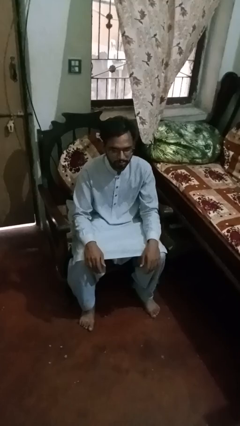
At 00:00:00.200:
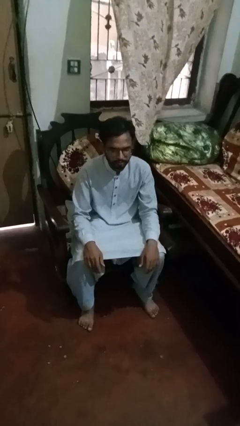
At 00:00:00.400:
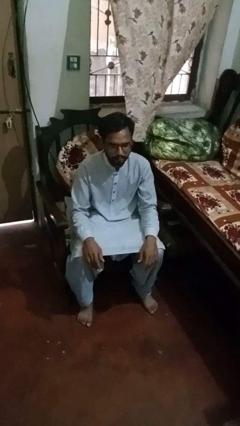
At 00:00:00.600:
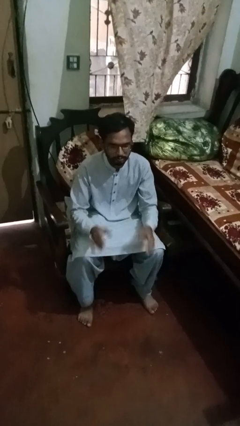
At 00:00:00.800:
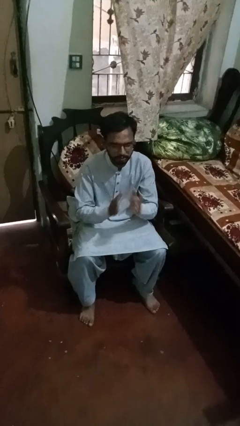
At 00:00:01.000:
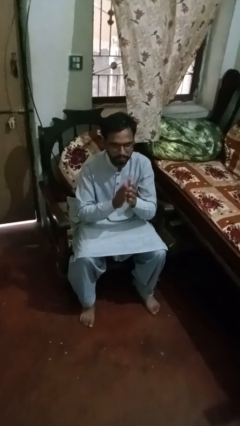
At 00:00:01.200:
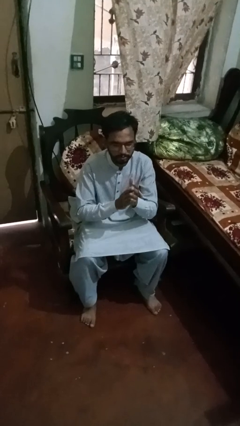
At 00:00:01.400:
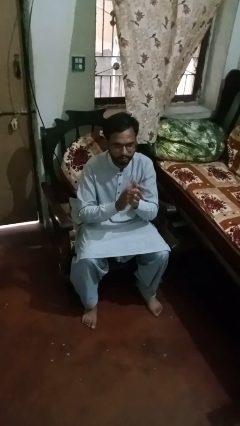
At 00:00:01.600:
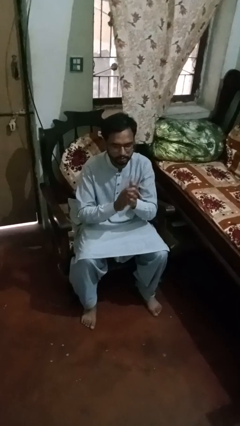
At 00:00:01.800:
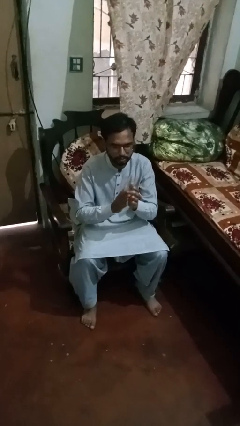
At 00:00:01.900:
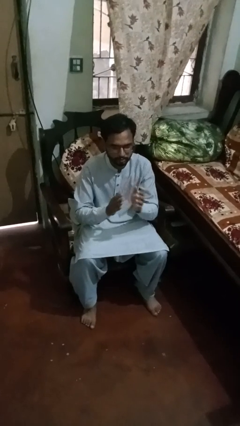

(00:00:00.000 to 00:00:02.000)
person claps hands

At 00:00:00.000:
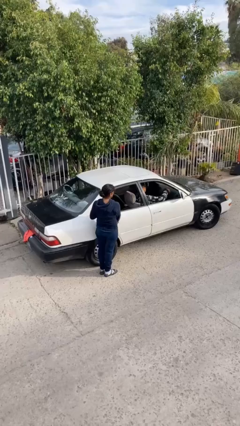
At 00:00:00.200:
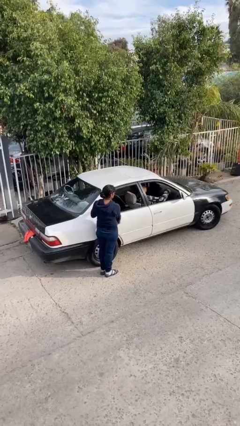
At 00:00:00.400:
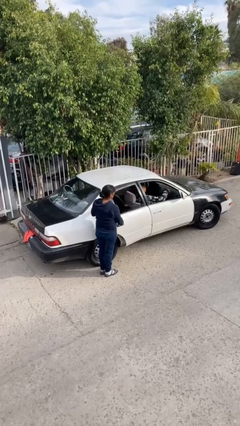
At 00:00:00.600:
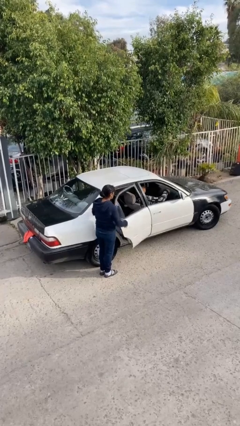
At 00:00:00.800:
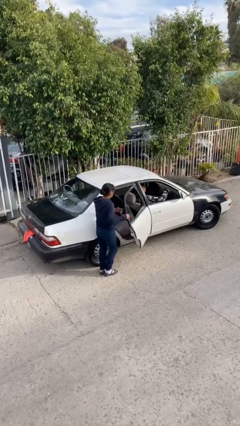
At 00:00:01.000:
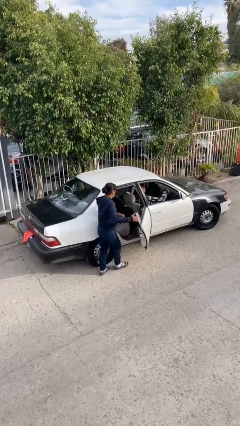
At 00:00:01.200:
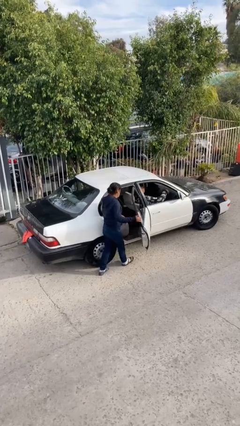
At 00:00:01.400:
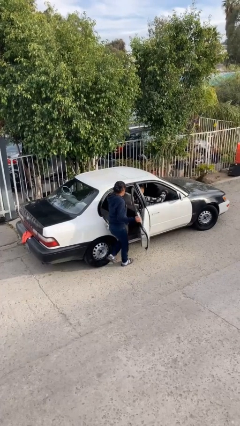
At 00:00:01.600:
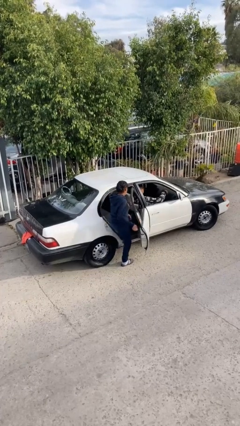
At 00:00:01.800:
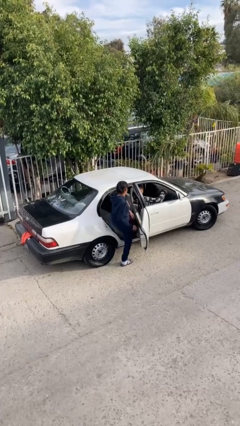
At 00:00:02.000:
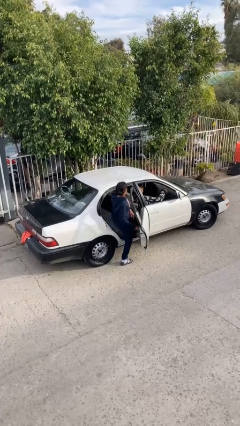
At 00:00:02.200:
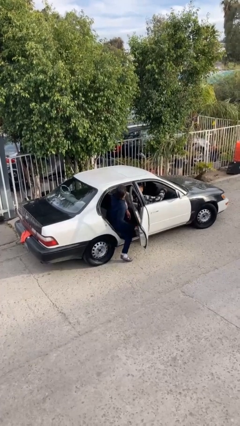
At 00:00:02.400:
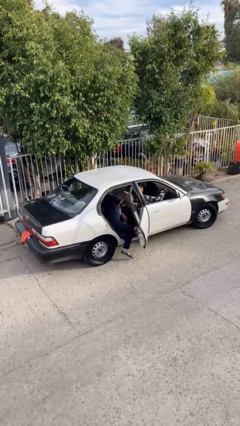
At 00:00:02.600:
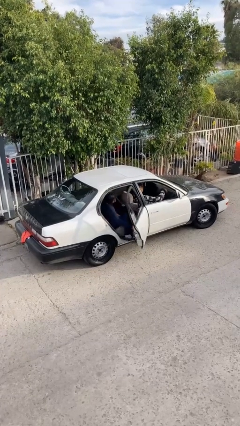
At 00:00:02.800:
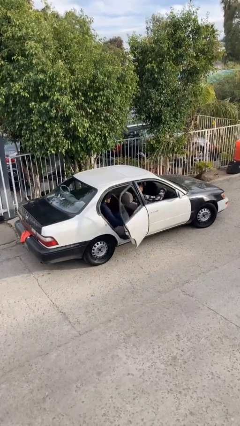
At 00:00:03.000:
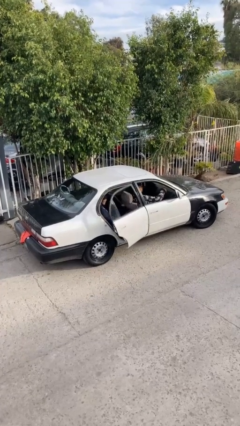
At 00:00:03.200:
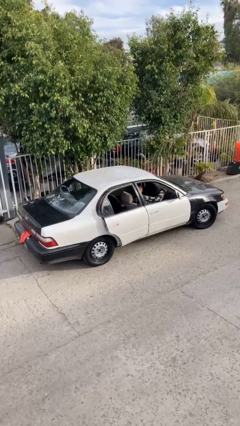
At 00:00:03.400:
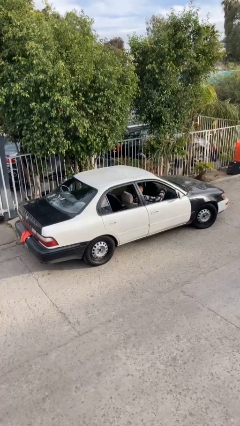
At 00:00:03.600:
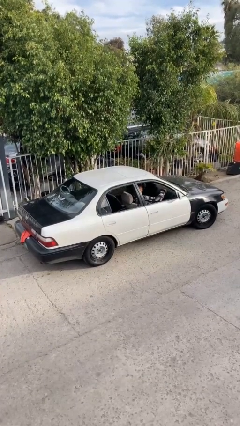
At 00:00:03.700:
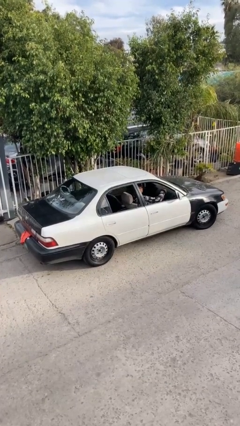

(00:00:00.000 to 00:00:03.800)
car picks up person

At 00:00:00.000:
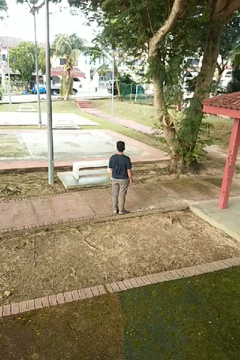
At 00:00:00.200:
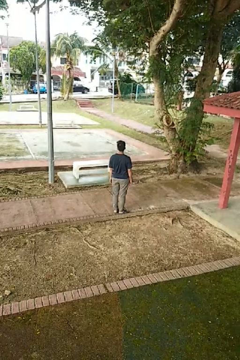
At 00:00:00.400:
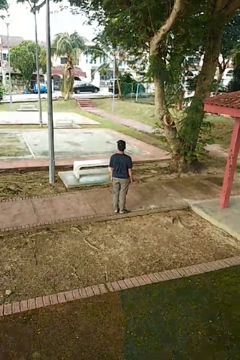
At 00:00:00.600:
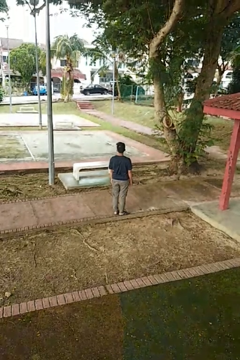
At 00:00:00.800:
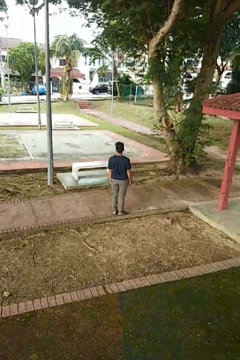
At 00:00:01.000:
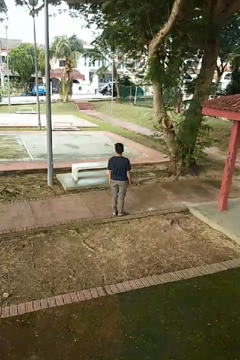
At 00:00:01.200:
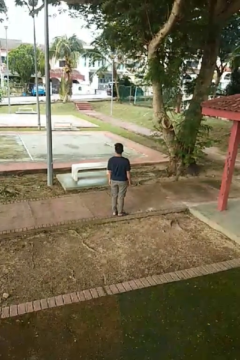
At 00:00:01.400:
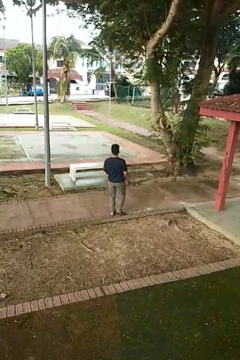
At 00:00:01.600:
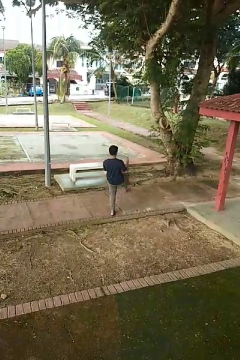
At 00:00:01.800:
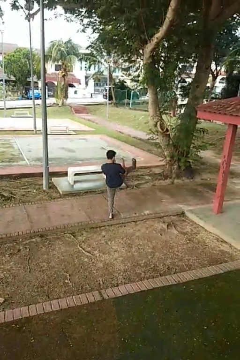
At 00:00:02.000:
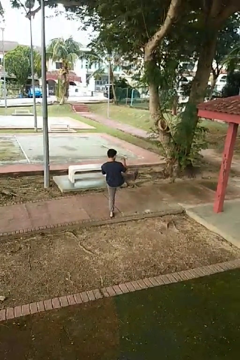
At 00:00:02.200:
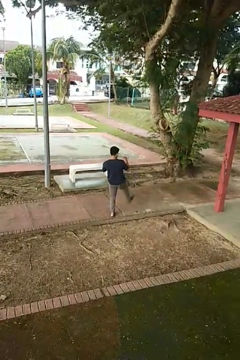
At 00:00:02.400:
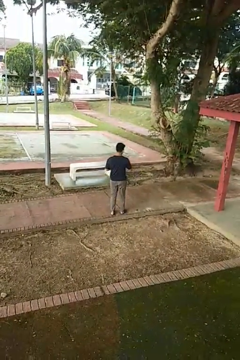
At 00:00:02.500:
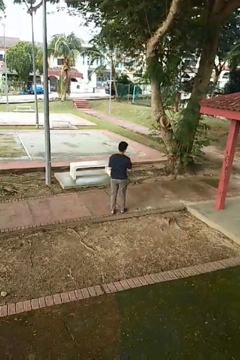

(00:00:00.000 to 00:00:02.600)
person karate kicks

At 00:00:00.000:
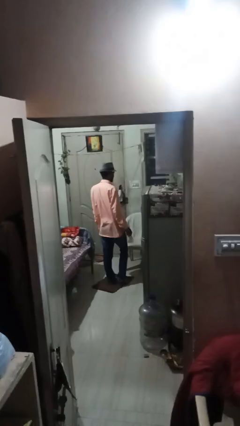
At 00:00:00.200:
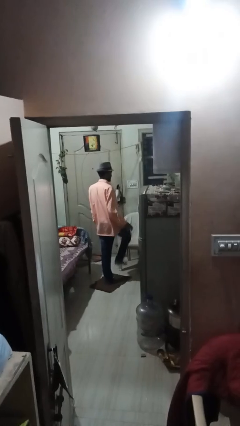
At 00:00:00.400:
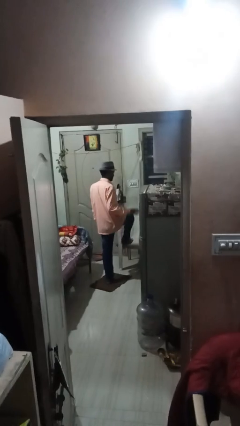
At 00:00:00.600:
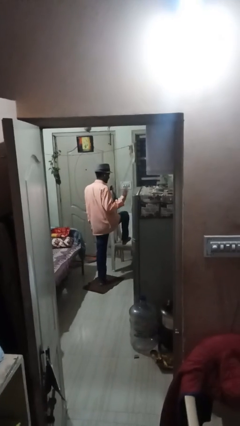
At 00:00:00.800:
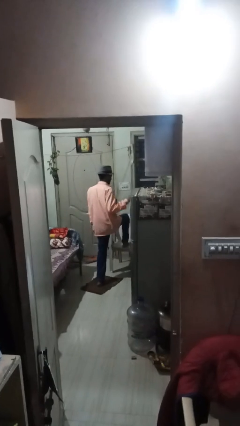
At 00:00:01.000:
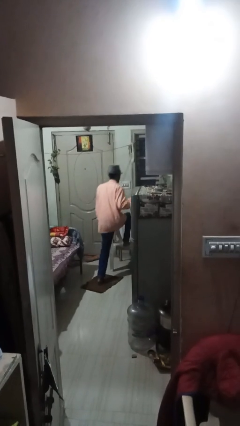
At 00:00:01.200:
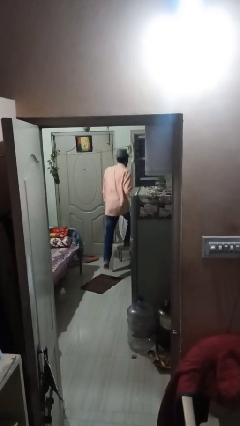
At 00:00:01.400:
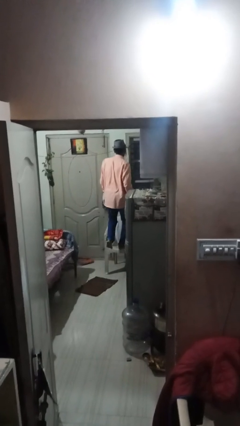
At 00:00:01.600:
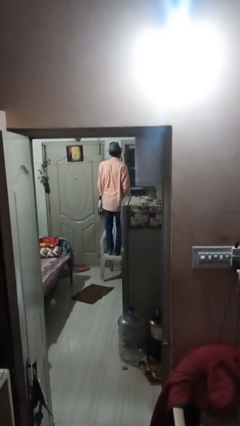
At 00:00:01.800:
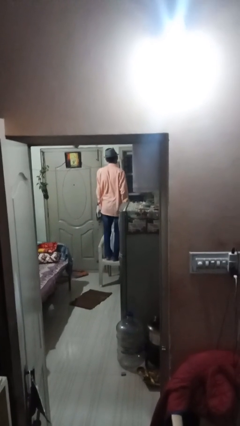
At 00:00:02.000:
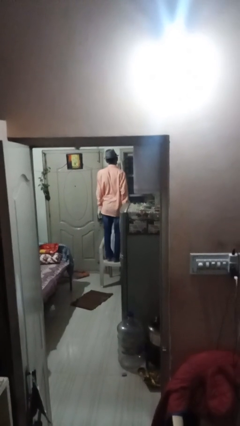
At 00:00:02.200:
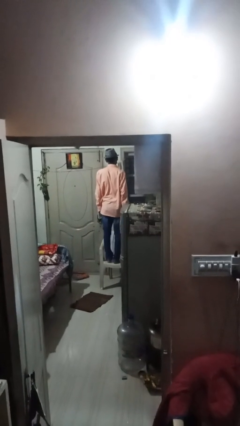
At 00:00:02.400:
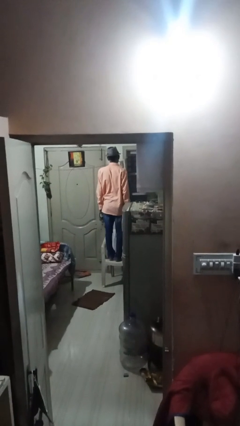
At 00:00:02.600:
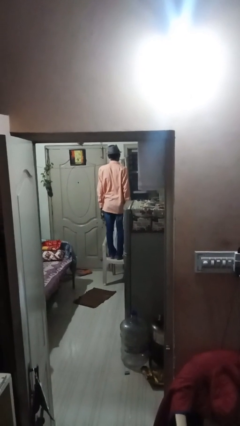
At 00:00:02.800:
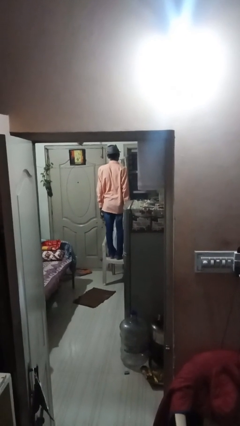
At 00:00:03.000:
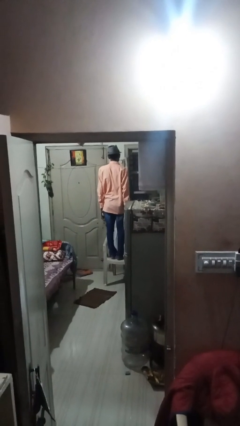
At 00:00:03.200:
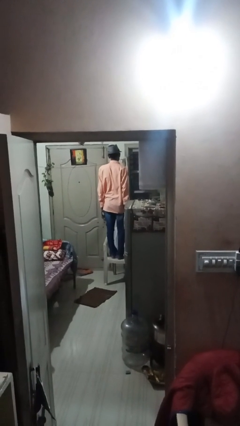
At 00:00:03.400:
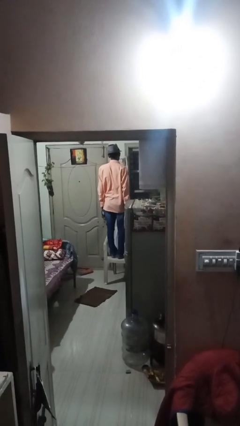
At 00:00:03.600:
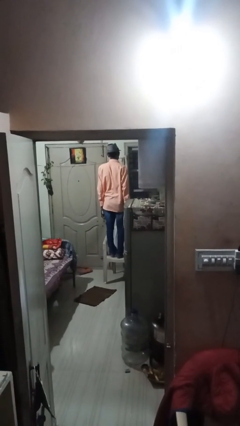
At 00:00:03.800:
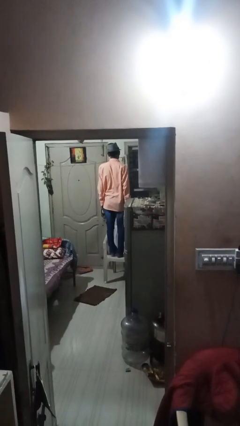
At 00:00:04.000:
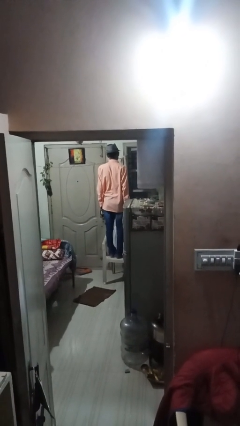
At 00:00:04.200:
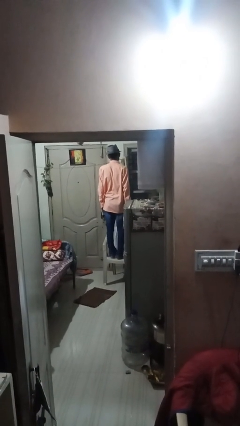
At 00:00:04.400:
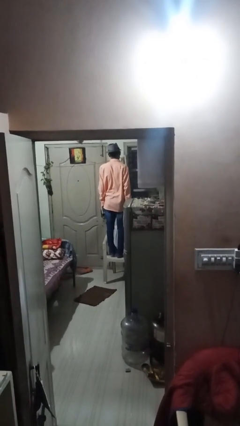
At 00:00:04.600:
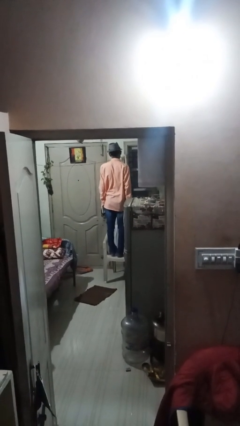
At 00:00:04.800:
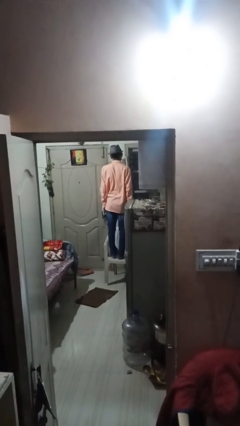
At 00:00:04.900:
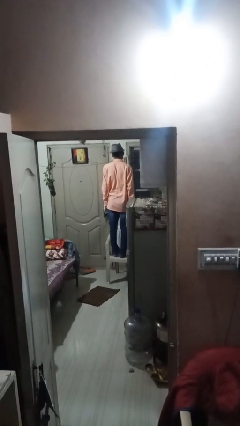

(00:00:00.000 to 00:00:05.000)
person climbs on chair

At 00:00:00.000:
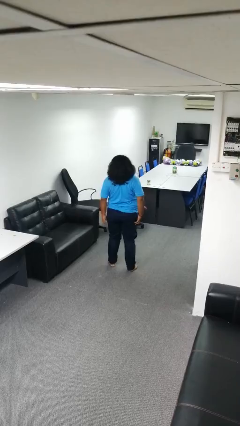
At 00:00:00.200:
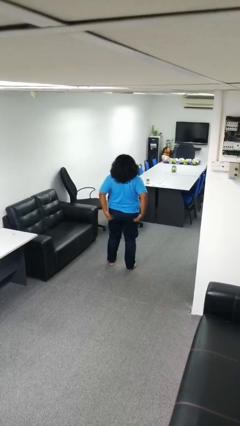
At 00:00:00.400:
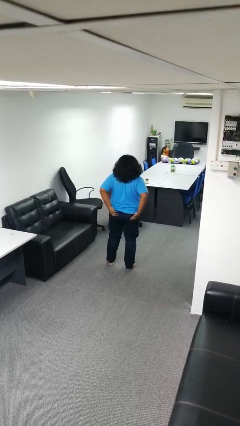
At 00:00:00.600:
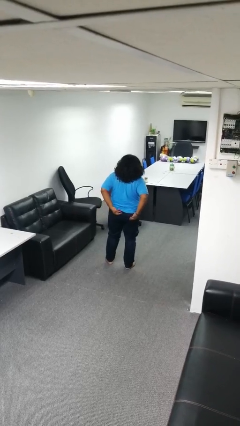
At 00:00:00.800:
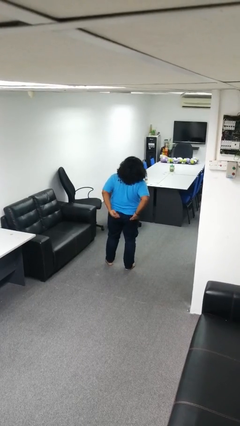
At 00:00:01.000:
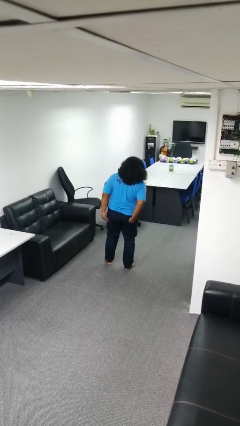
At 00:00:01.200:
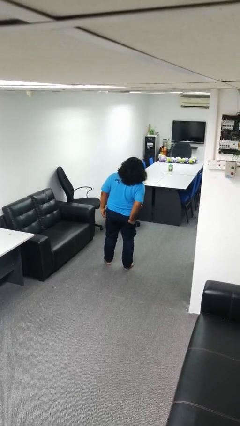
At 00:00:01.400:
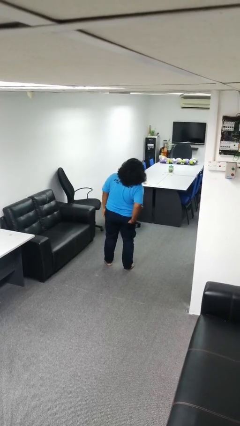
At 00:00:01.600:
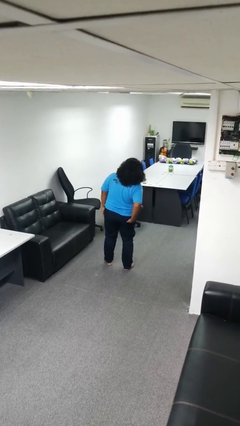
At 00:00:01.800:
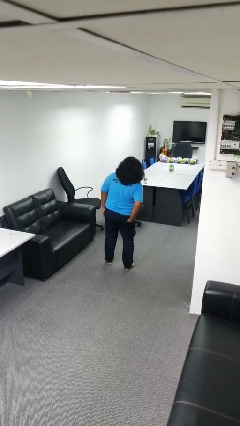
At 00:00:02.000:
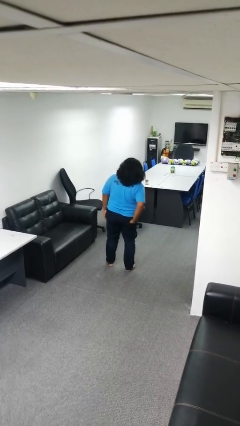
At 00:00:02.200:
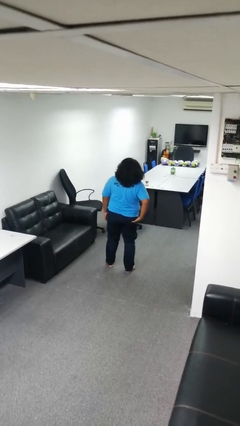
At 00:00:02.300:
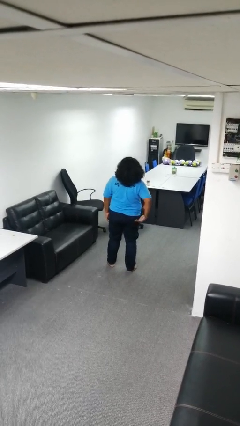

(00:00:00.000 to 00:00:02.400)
person puts hands in back pockets

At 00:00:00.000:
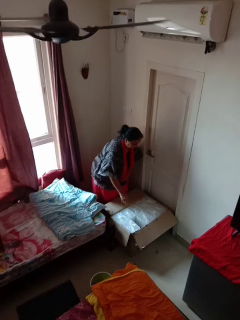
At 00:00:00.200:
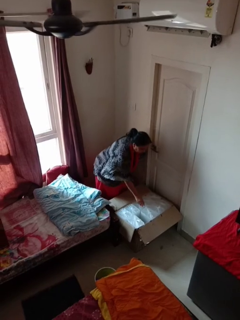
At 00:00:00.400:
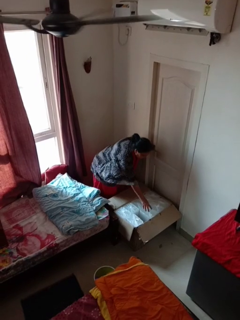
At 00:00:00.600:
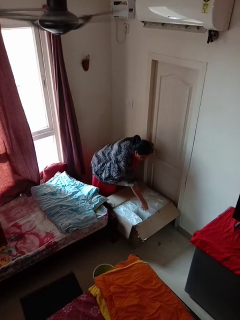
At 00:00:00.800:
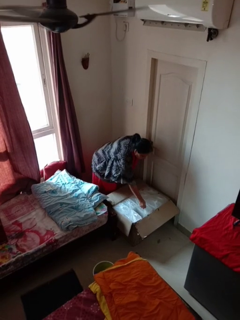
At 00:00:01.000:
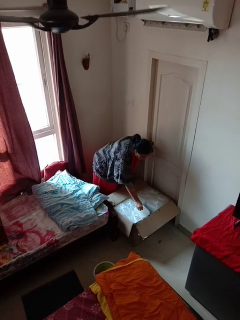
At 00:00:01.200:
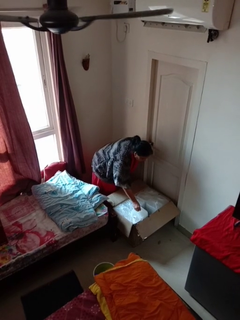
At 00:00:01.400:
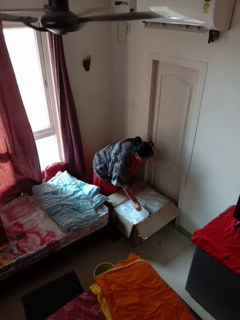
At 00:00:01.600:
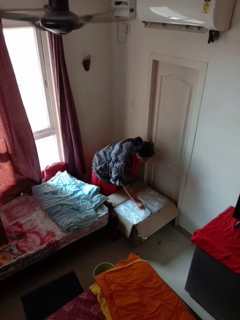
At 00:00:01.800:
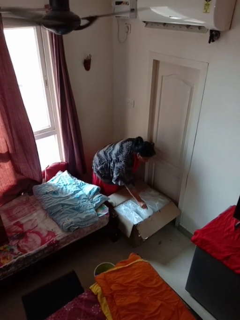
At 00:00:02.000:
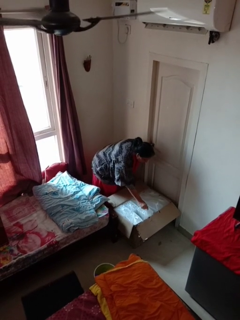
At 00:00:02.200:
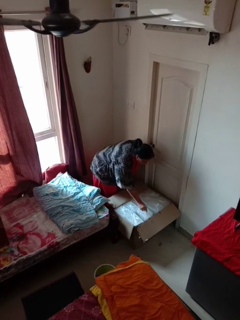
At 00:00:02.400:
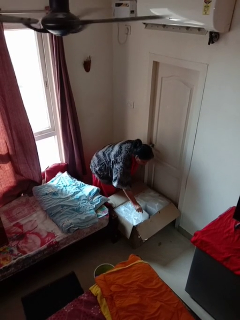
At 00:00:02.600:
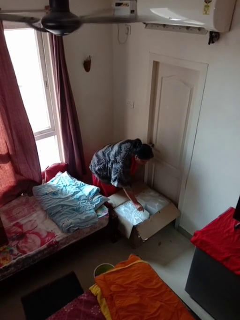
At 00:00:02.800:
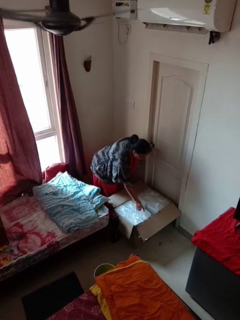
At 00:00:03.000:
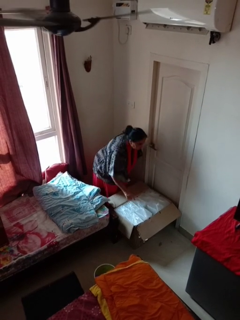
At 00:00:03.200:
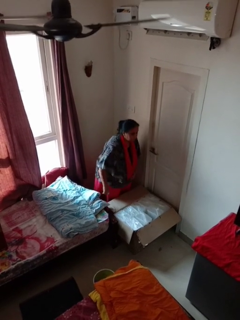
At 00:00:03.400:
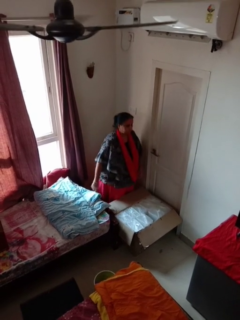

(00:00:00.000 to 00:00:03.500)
person searches in box
